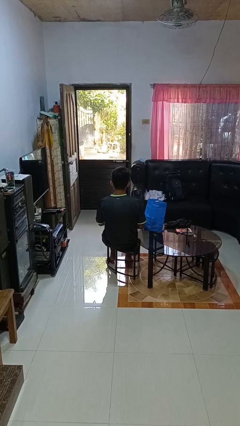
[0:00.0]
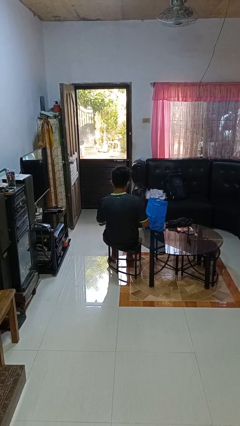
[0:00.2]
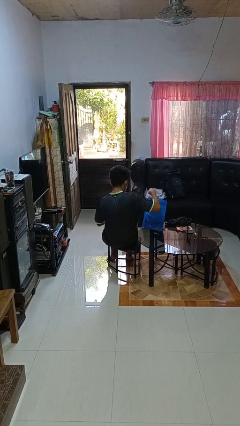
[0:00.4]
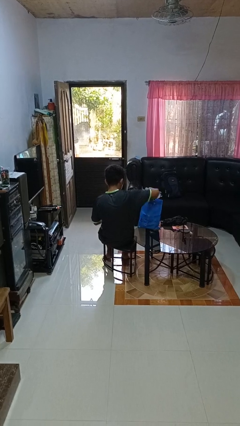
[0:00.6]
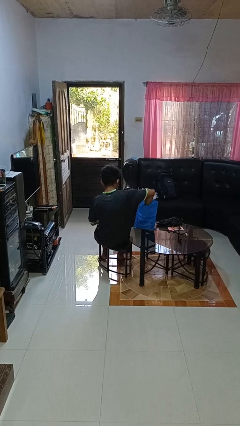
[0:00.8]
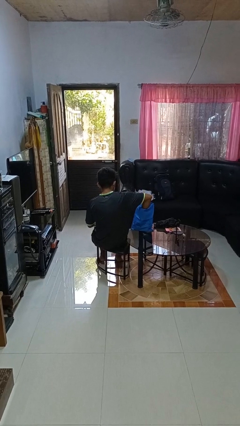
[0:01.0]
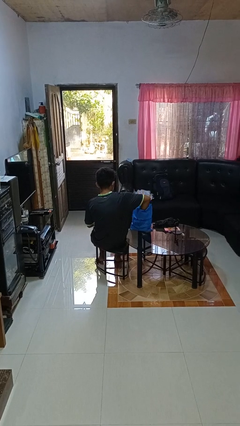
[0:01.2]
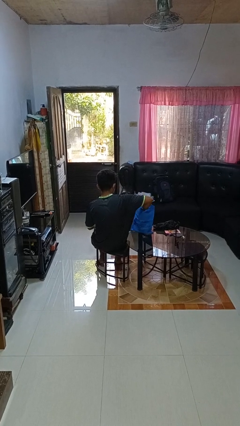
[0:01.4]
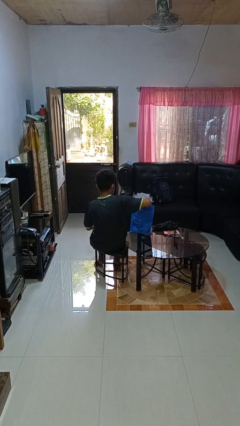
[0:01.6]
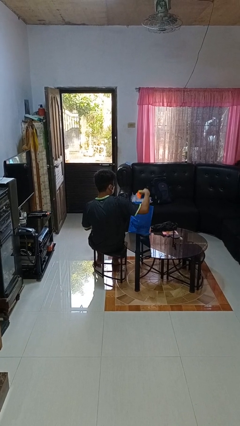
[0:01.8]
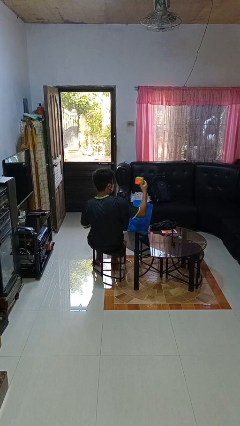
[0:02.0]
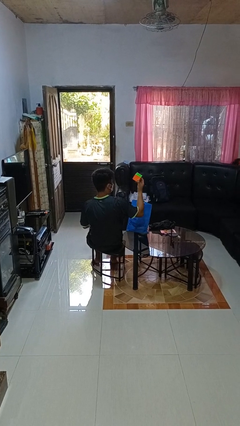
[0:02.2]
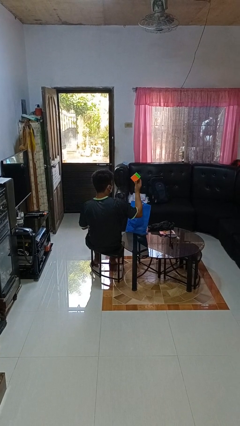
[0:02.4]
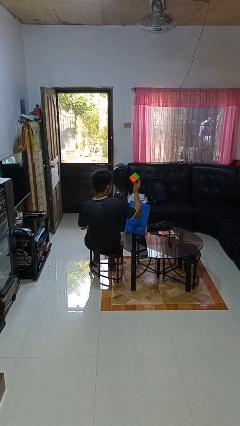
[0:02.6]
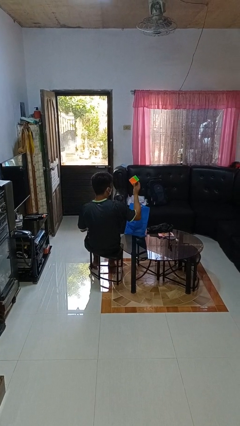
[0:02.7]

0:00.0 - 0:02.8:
person takes object from bag

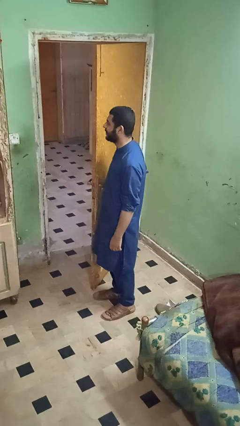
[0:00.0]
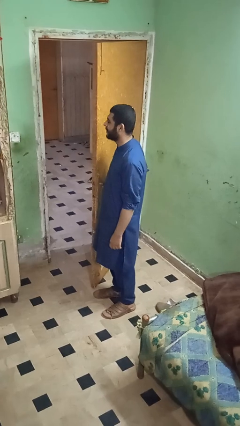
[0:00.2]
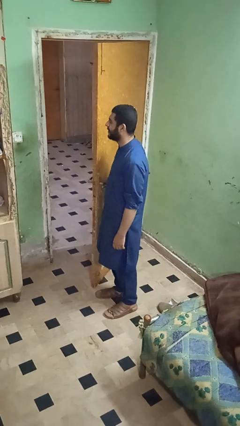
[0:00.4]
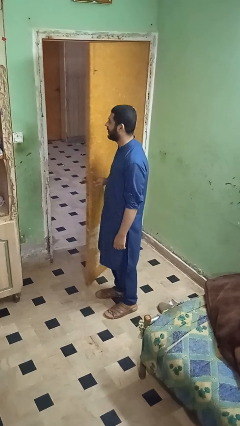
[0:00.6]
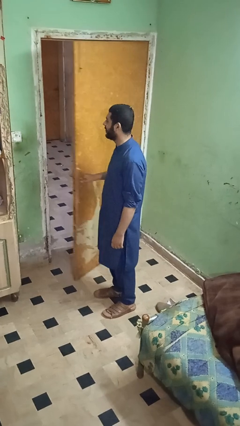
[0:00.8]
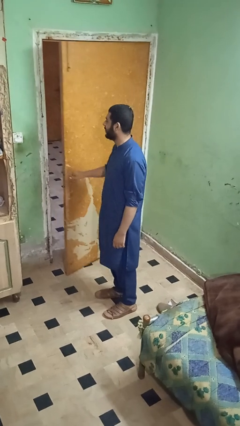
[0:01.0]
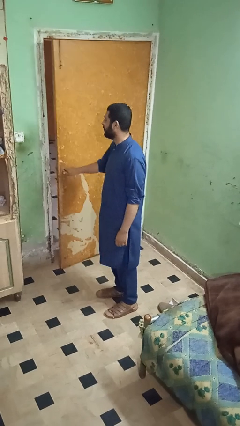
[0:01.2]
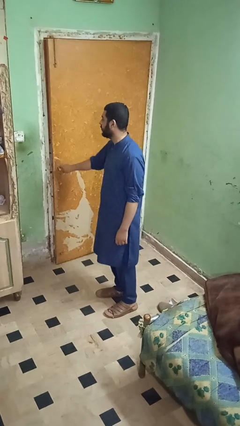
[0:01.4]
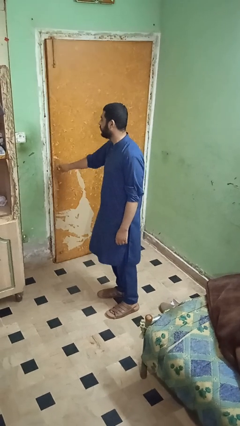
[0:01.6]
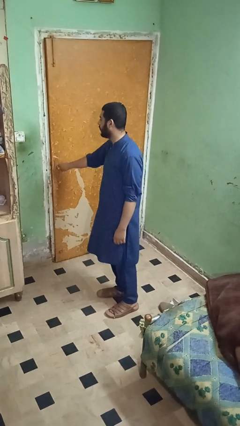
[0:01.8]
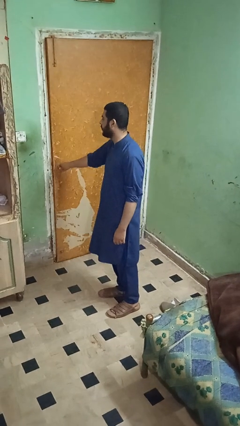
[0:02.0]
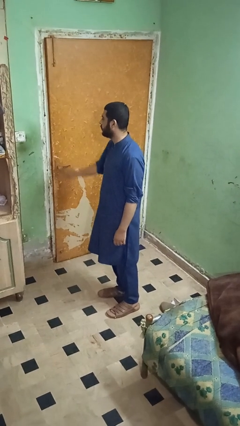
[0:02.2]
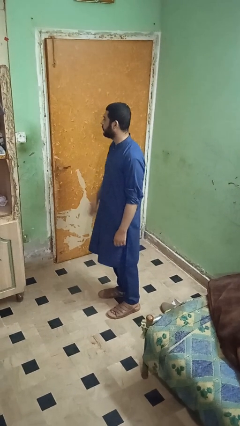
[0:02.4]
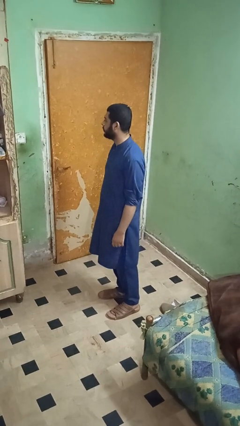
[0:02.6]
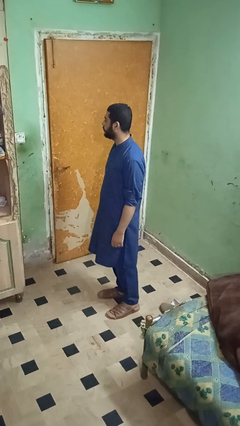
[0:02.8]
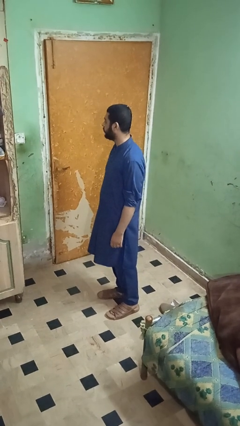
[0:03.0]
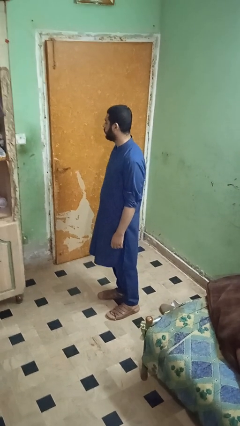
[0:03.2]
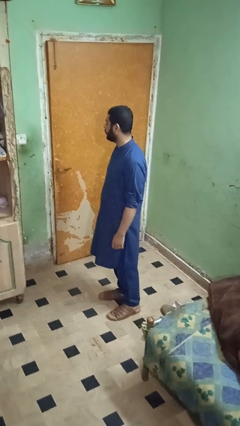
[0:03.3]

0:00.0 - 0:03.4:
person closes facility door

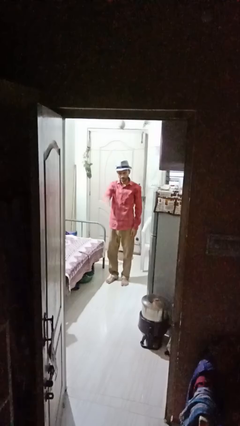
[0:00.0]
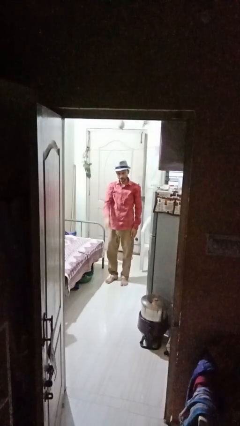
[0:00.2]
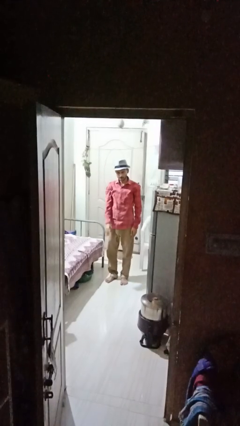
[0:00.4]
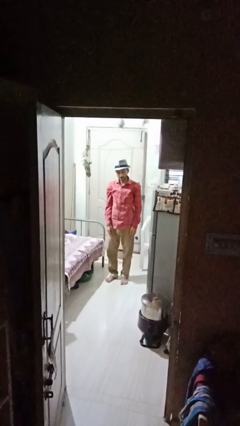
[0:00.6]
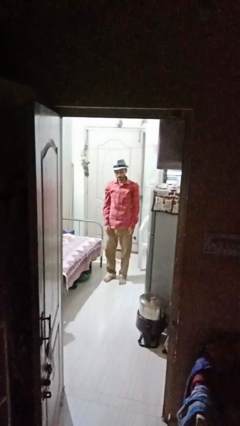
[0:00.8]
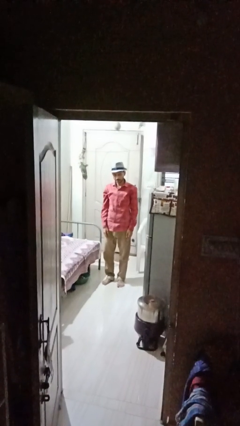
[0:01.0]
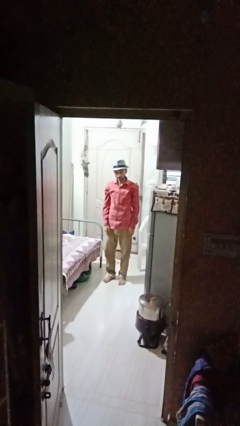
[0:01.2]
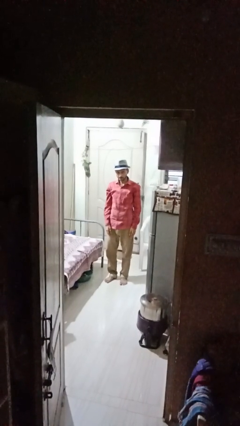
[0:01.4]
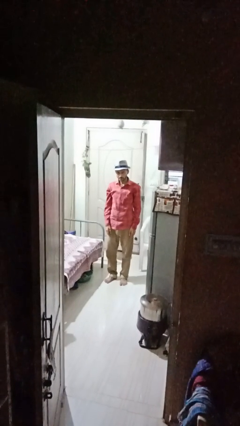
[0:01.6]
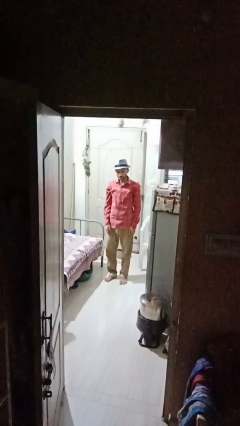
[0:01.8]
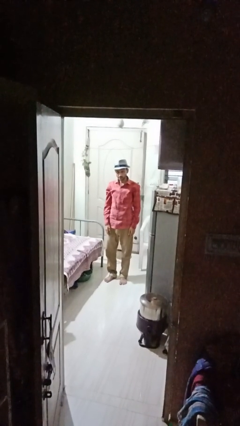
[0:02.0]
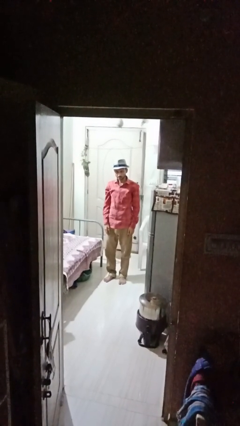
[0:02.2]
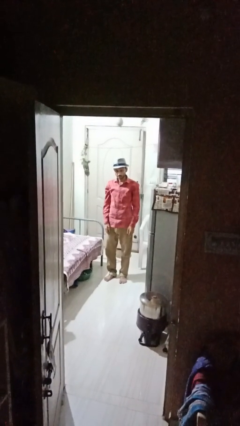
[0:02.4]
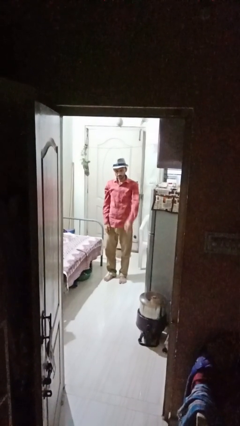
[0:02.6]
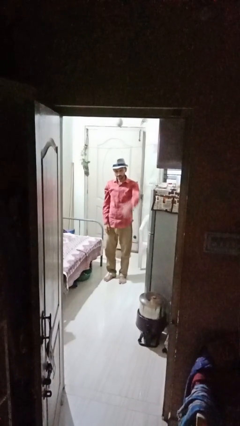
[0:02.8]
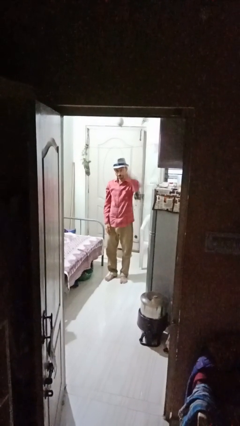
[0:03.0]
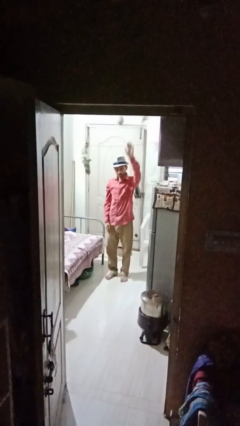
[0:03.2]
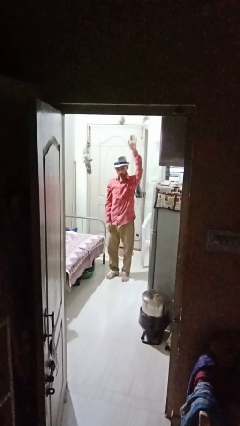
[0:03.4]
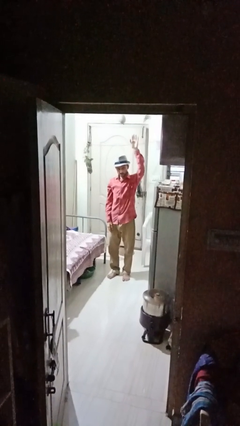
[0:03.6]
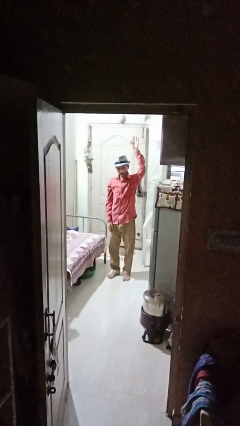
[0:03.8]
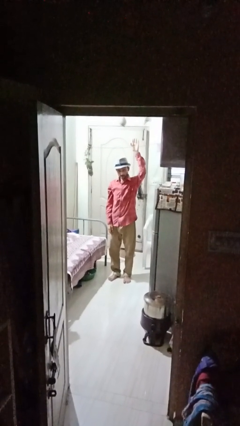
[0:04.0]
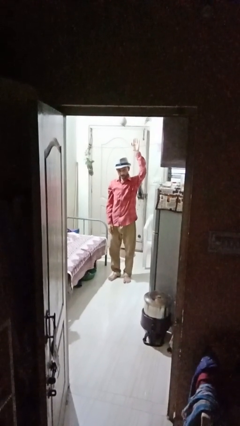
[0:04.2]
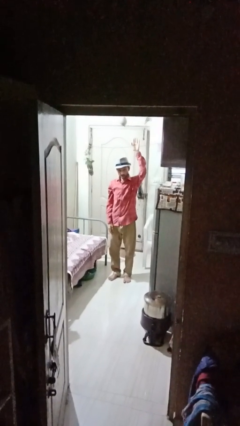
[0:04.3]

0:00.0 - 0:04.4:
person gestures lower hand

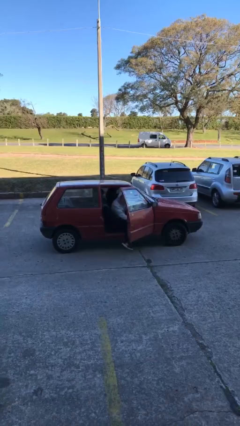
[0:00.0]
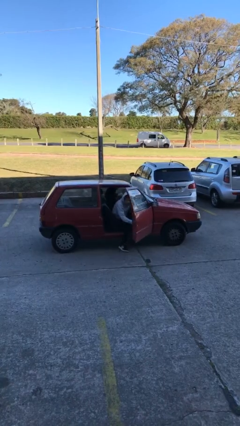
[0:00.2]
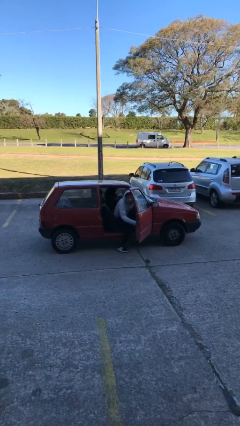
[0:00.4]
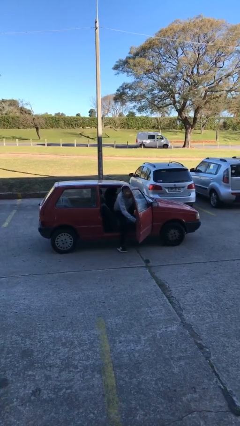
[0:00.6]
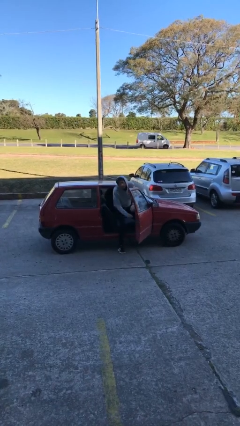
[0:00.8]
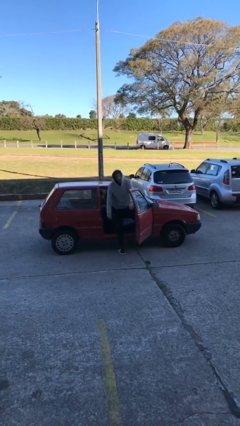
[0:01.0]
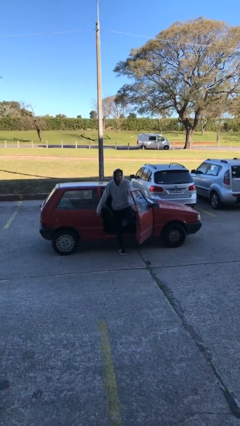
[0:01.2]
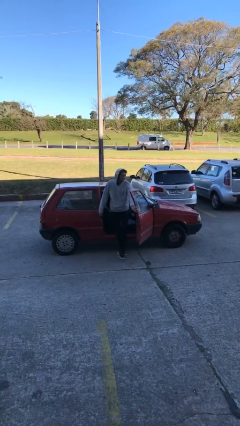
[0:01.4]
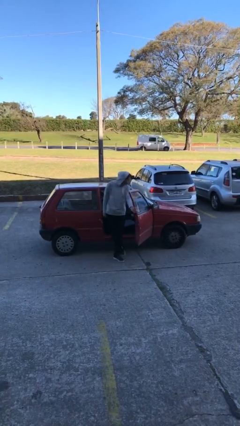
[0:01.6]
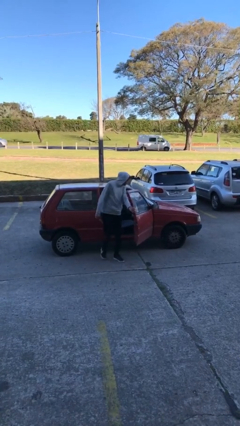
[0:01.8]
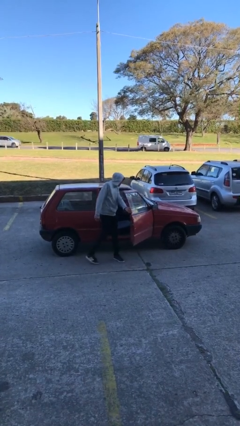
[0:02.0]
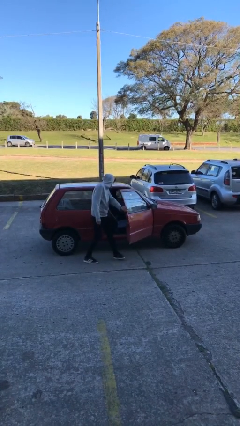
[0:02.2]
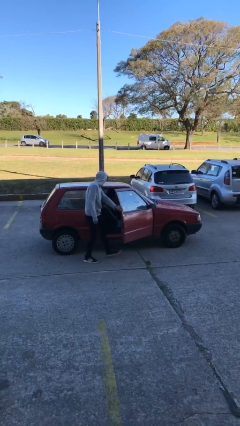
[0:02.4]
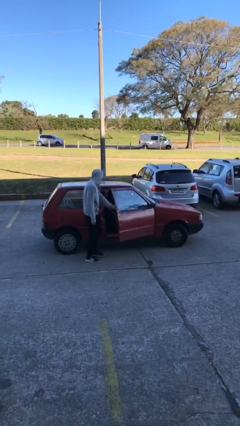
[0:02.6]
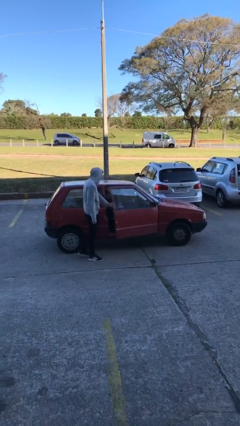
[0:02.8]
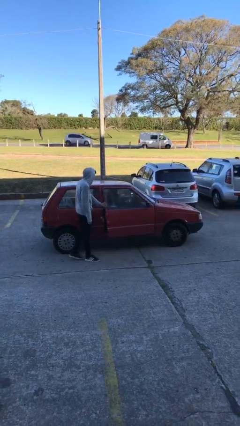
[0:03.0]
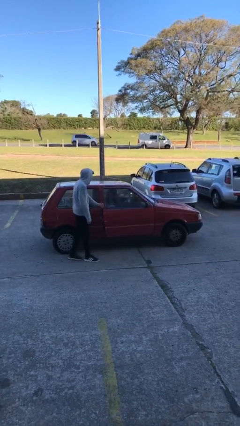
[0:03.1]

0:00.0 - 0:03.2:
car drops off person

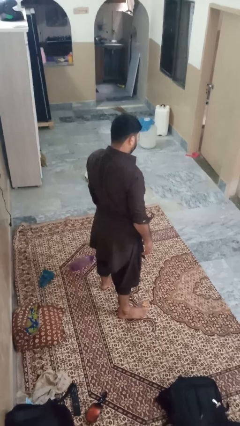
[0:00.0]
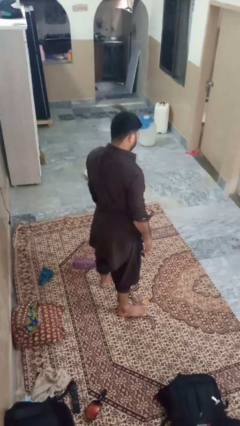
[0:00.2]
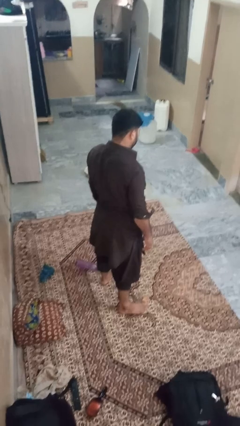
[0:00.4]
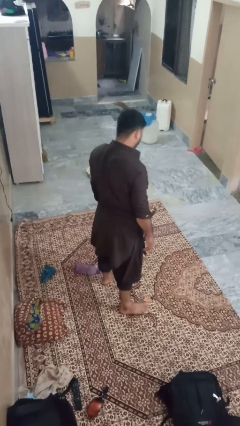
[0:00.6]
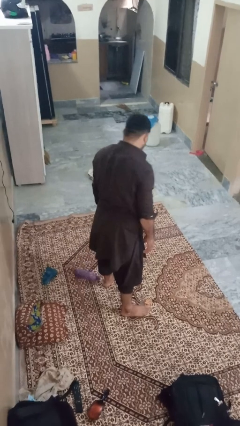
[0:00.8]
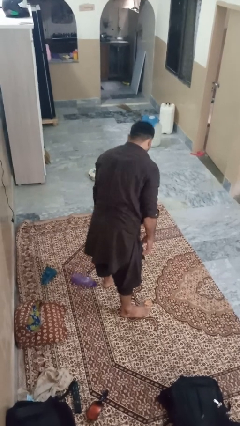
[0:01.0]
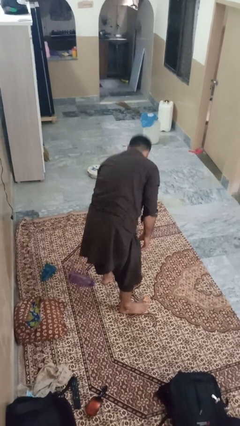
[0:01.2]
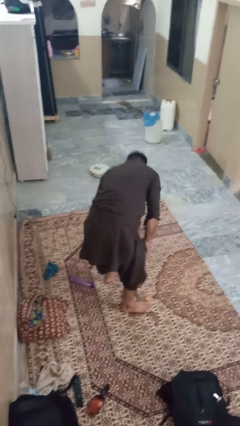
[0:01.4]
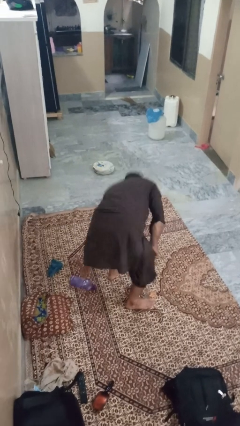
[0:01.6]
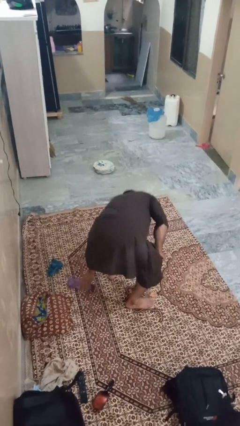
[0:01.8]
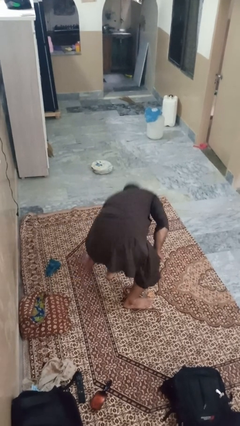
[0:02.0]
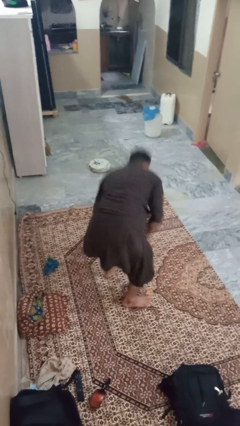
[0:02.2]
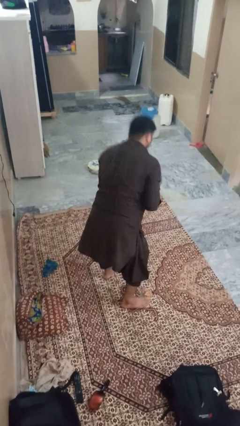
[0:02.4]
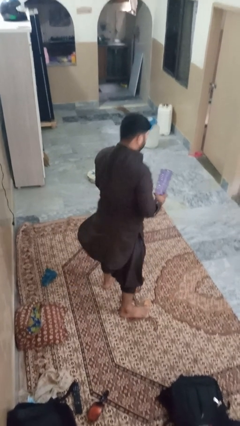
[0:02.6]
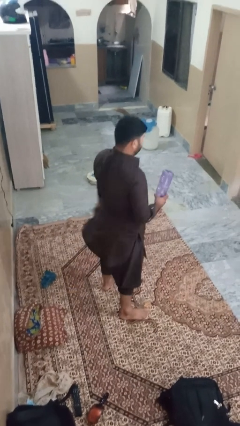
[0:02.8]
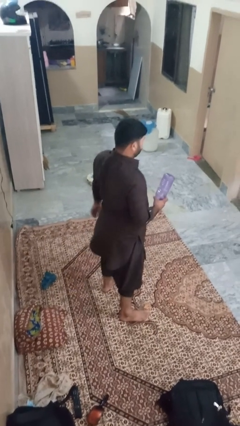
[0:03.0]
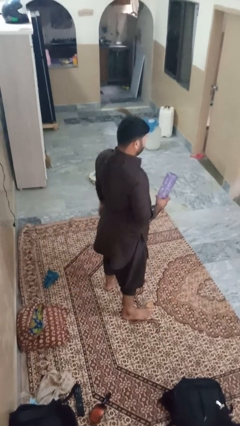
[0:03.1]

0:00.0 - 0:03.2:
person picks up object from floor

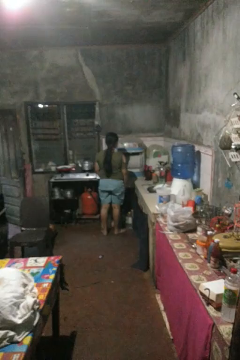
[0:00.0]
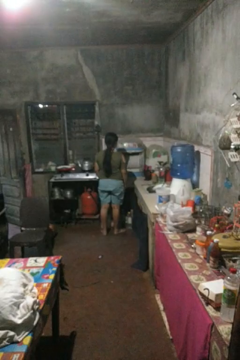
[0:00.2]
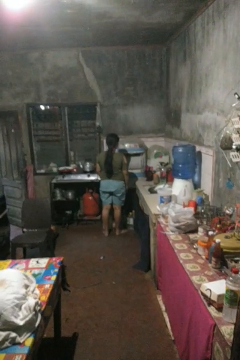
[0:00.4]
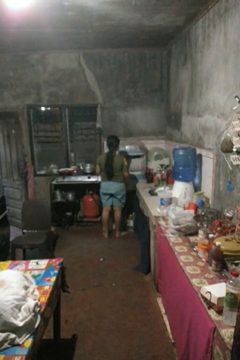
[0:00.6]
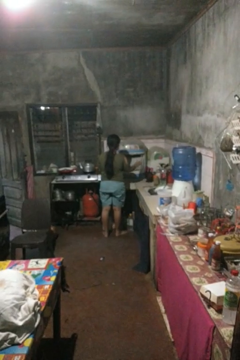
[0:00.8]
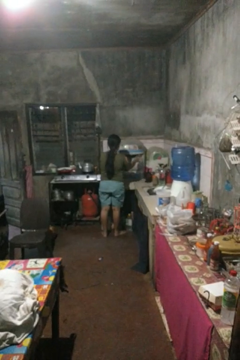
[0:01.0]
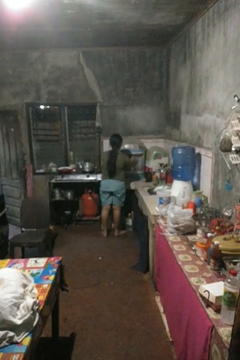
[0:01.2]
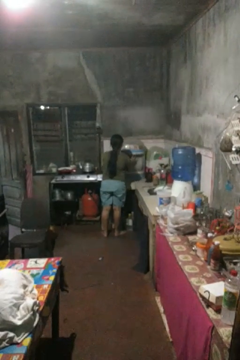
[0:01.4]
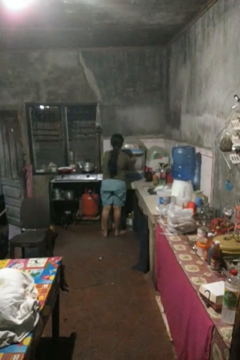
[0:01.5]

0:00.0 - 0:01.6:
person closes kitchen drawer
